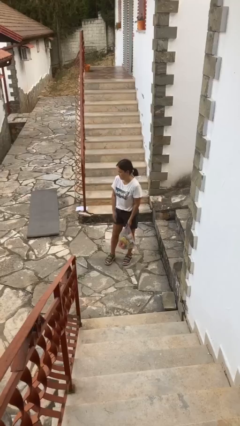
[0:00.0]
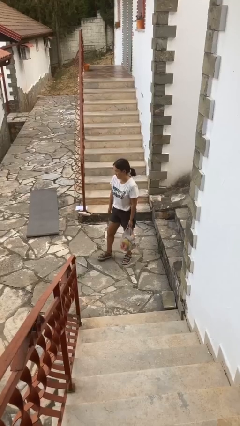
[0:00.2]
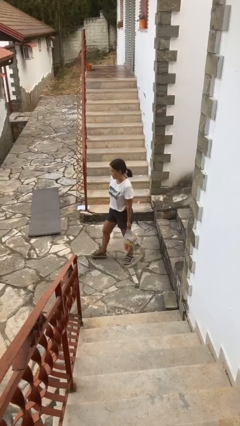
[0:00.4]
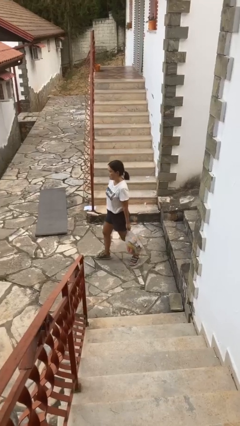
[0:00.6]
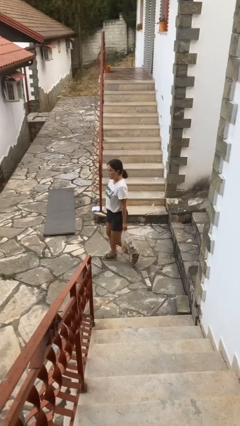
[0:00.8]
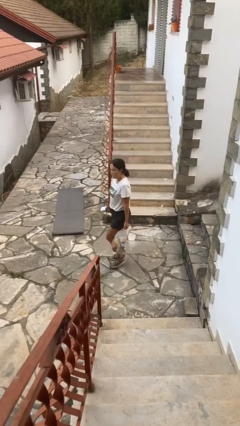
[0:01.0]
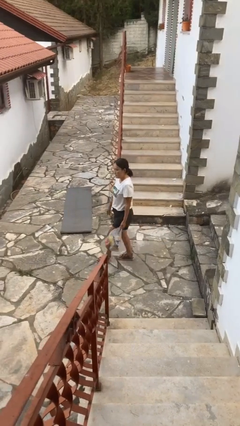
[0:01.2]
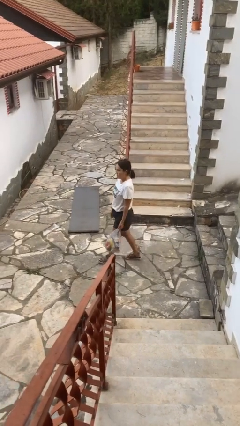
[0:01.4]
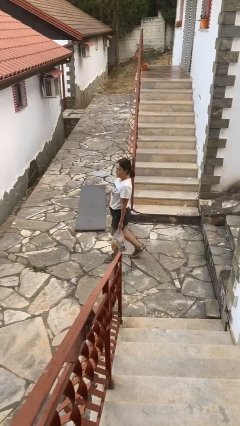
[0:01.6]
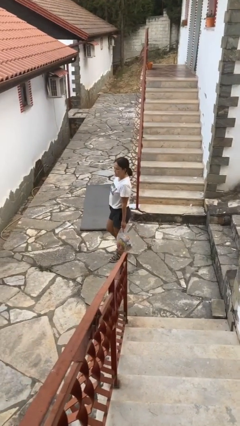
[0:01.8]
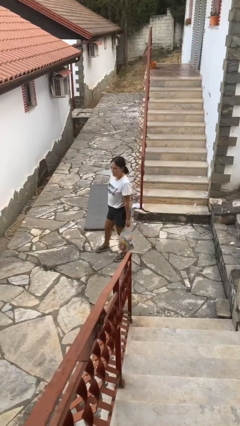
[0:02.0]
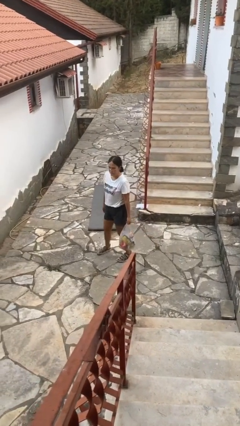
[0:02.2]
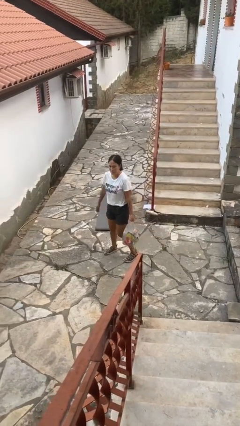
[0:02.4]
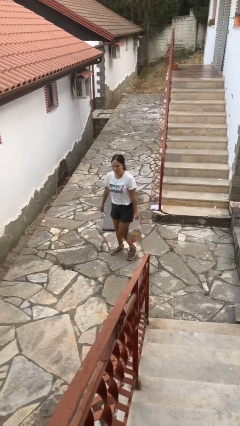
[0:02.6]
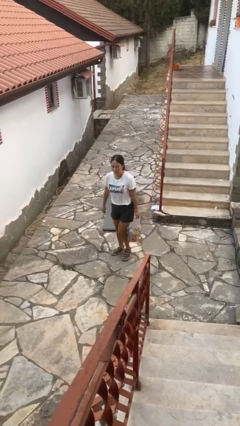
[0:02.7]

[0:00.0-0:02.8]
person carries groceries

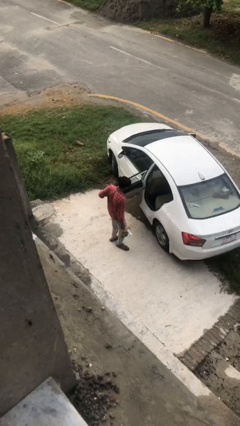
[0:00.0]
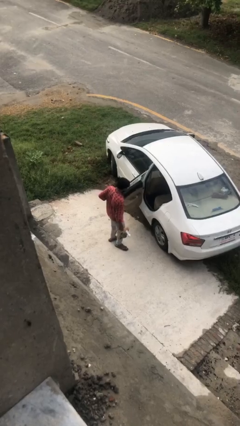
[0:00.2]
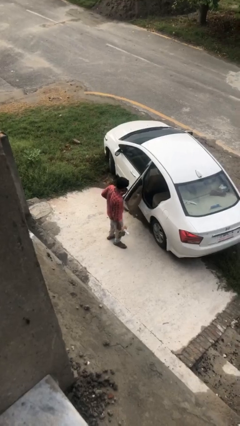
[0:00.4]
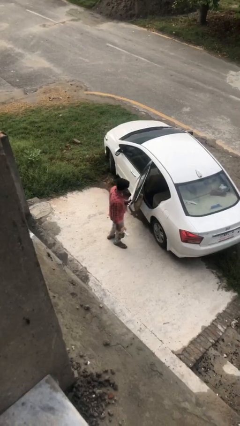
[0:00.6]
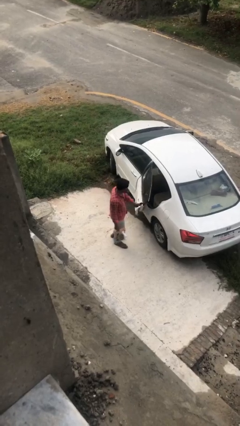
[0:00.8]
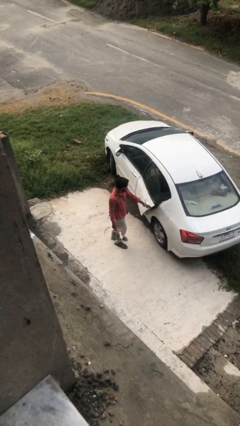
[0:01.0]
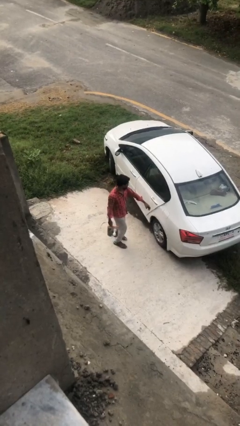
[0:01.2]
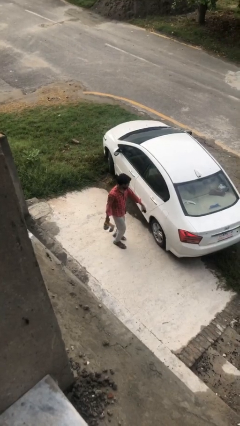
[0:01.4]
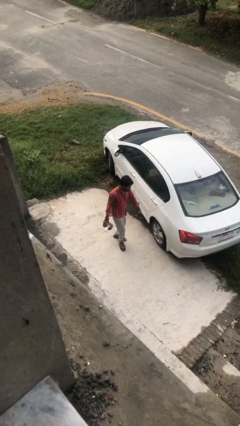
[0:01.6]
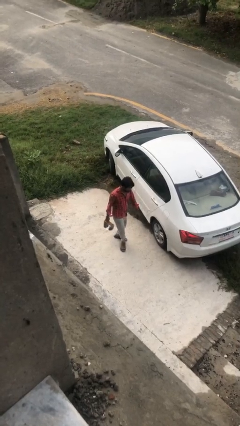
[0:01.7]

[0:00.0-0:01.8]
person closes car door

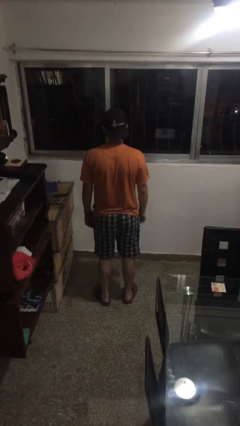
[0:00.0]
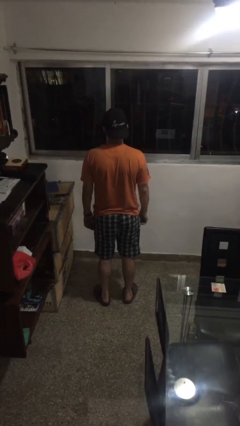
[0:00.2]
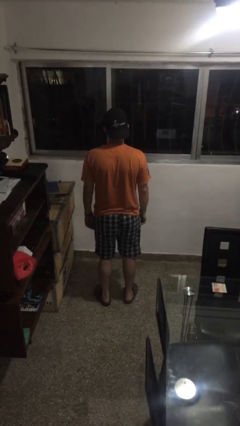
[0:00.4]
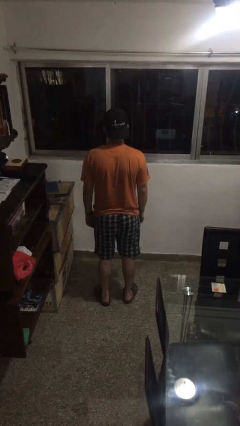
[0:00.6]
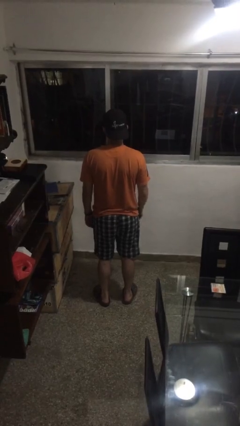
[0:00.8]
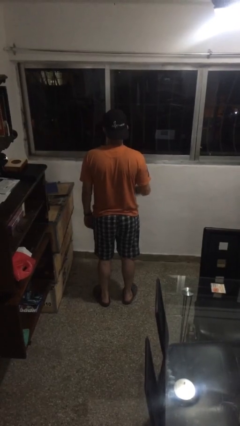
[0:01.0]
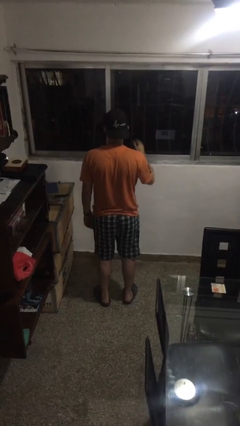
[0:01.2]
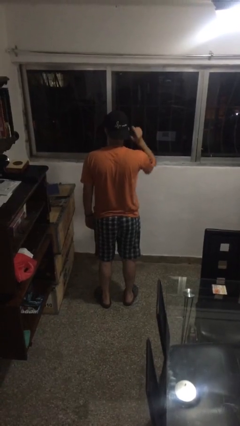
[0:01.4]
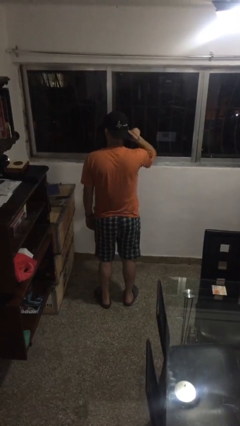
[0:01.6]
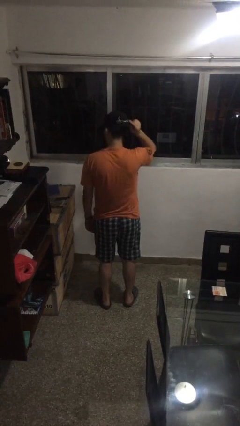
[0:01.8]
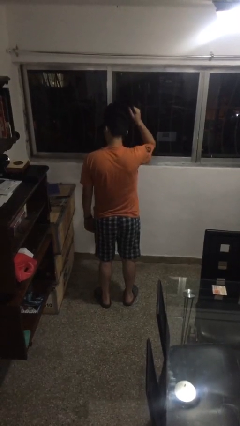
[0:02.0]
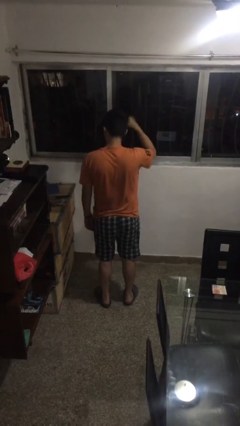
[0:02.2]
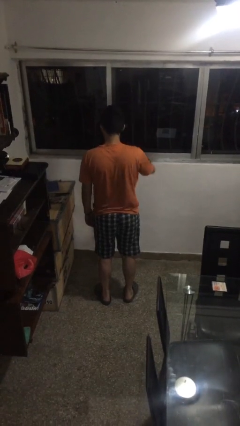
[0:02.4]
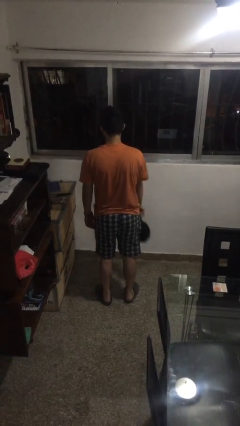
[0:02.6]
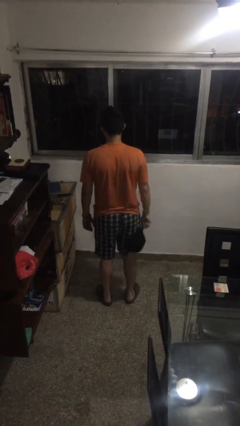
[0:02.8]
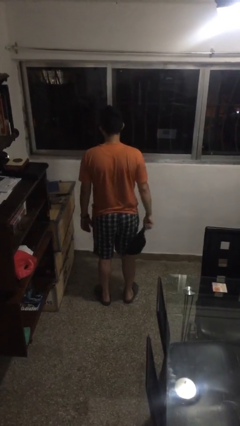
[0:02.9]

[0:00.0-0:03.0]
person takes off hat

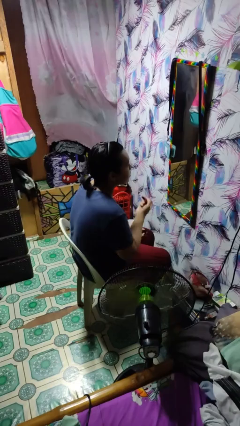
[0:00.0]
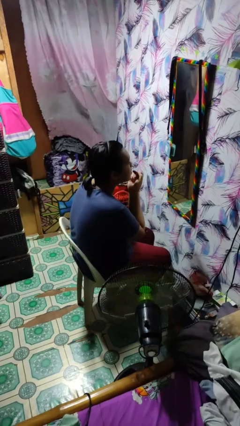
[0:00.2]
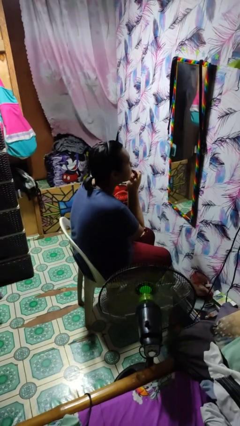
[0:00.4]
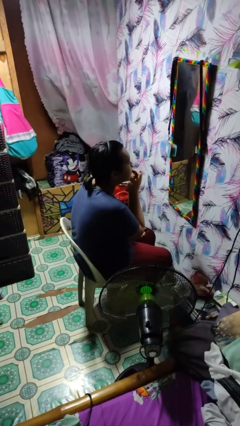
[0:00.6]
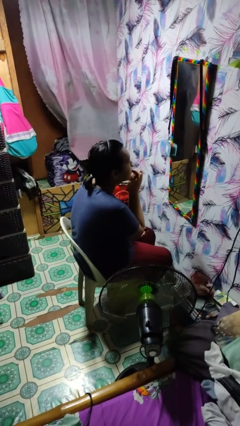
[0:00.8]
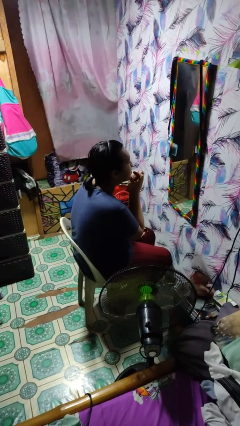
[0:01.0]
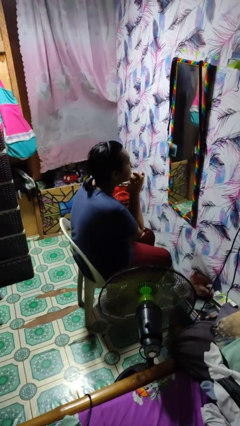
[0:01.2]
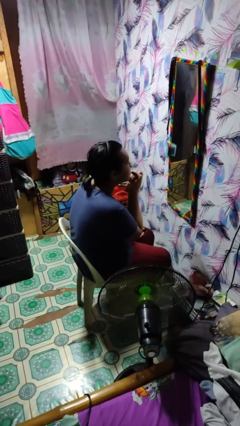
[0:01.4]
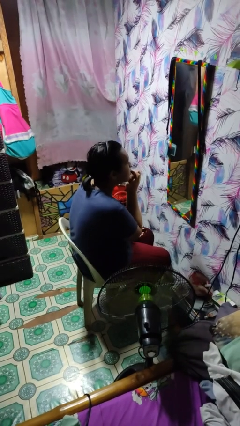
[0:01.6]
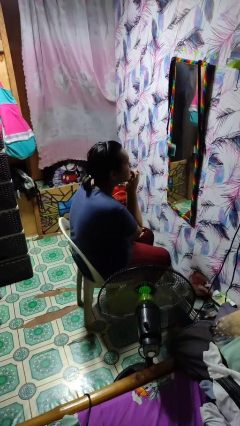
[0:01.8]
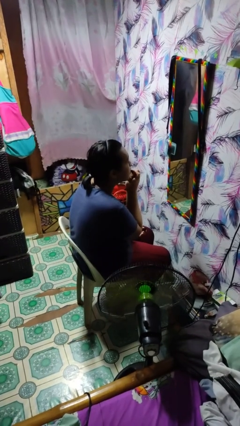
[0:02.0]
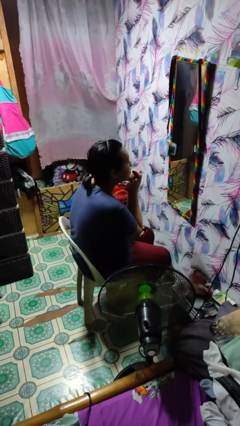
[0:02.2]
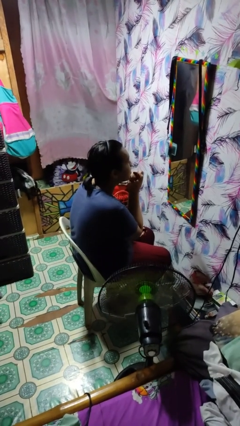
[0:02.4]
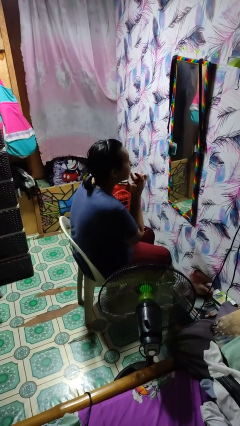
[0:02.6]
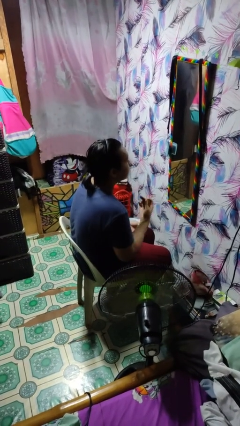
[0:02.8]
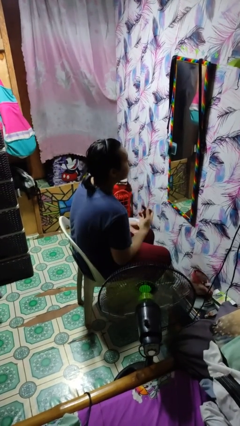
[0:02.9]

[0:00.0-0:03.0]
person applies lip makeup

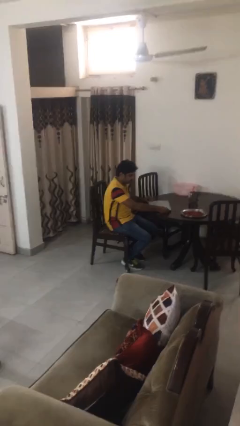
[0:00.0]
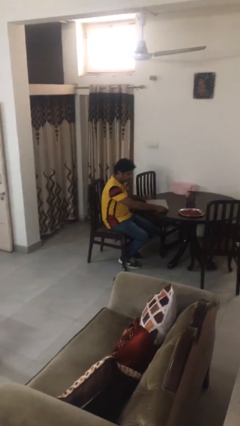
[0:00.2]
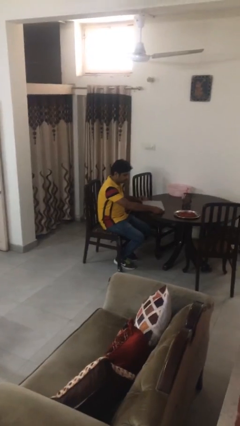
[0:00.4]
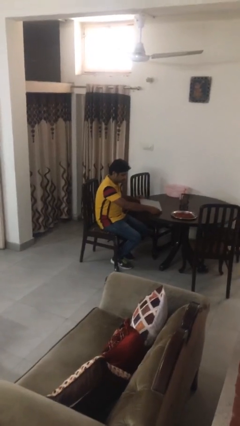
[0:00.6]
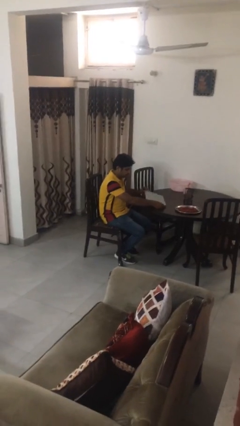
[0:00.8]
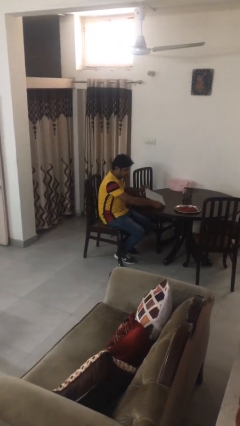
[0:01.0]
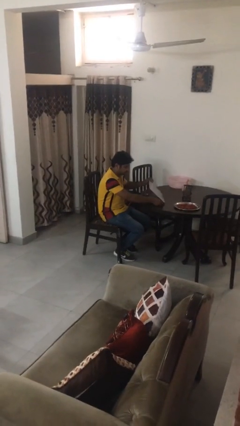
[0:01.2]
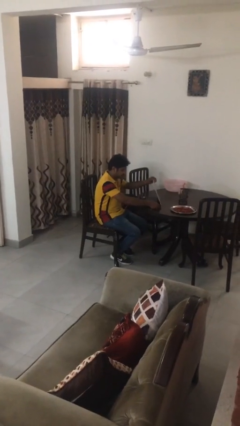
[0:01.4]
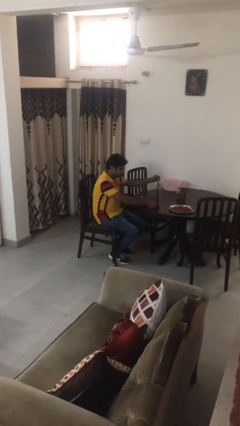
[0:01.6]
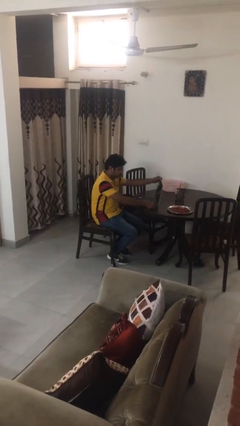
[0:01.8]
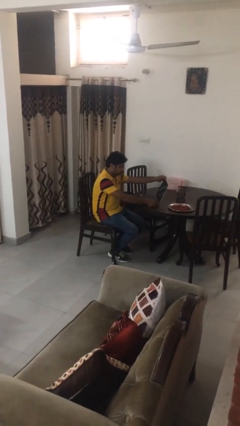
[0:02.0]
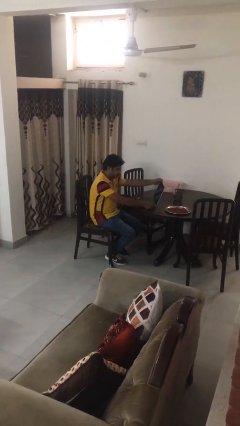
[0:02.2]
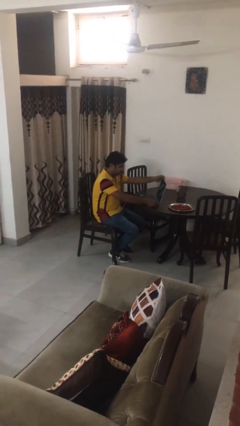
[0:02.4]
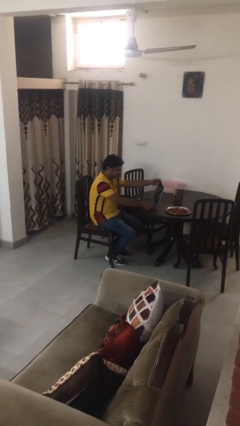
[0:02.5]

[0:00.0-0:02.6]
person opens laptop

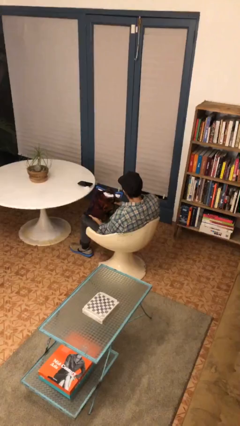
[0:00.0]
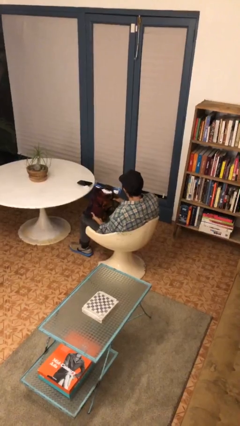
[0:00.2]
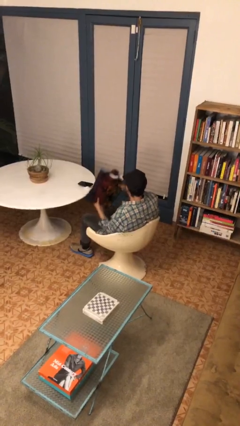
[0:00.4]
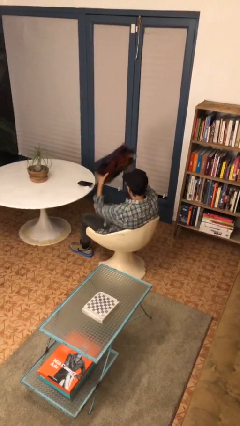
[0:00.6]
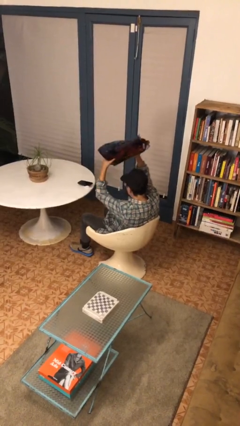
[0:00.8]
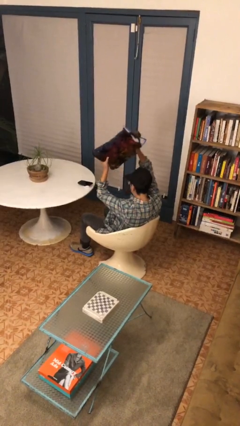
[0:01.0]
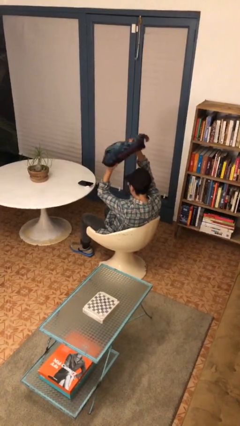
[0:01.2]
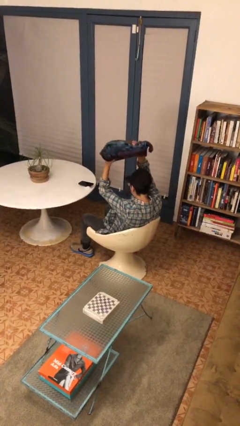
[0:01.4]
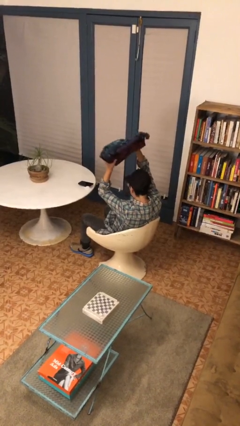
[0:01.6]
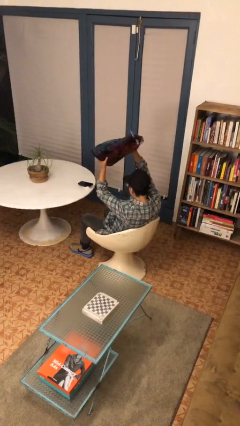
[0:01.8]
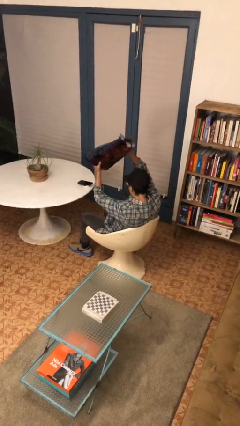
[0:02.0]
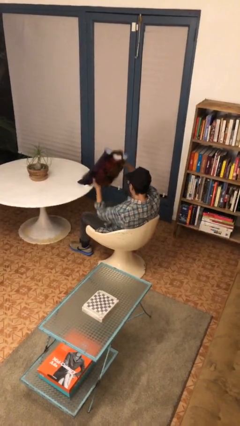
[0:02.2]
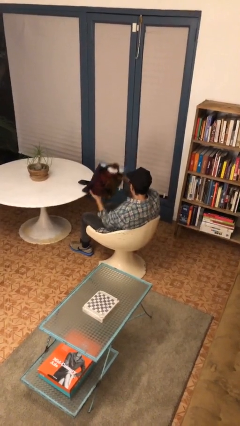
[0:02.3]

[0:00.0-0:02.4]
person holds object above head

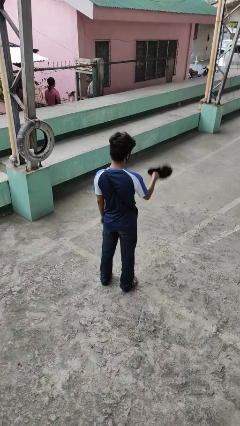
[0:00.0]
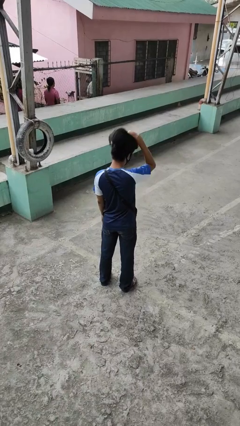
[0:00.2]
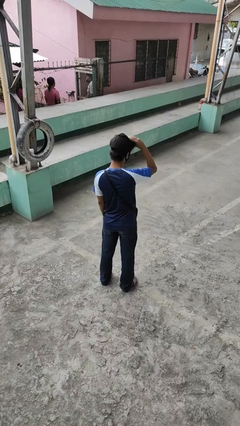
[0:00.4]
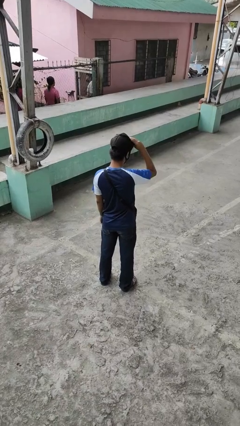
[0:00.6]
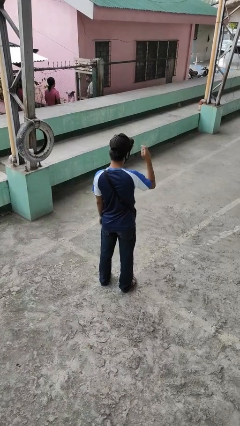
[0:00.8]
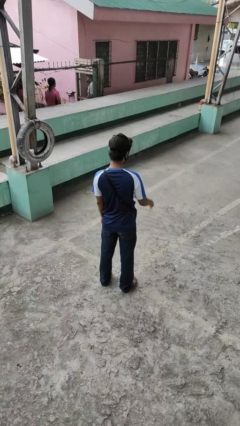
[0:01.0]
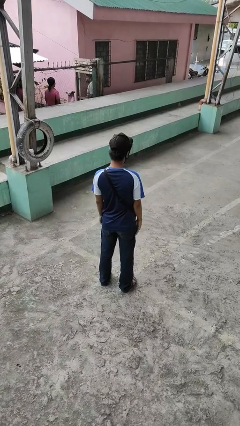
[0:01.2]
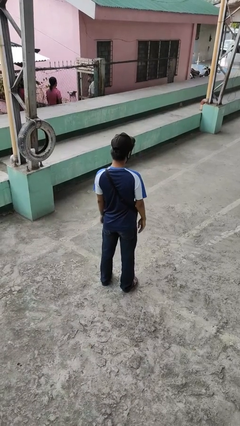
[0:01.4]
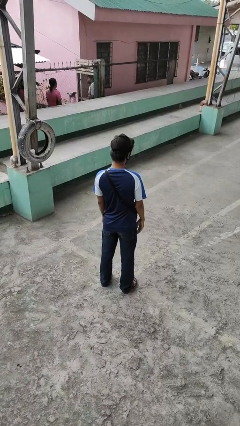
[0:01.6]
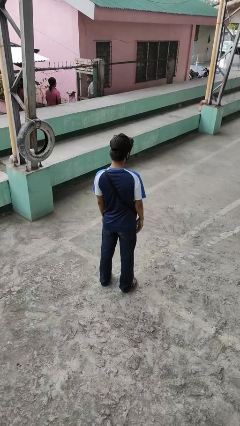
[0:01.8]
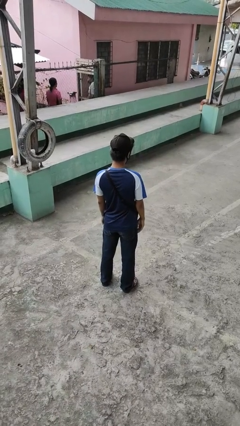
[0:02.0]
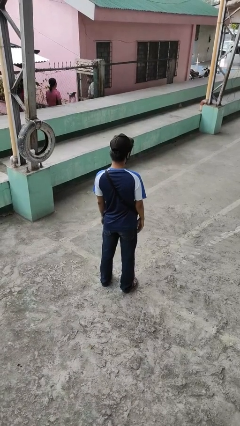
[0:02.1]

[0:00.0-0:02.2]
person puts on hat
